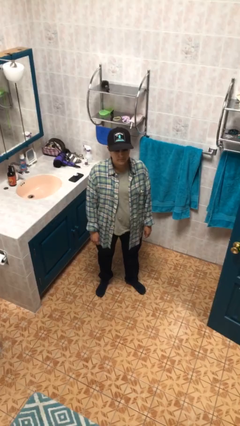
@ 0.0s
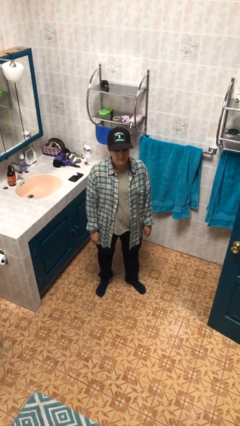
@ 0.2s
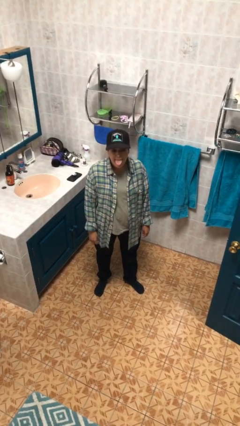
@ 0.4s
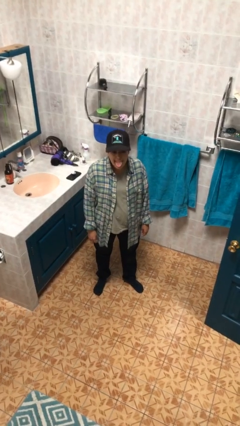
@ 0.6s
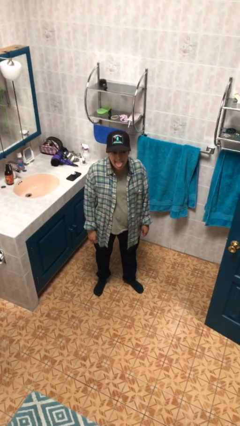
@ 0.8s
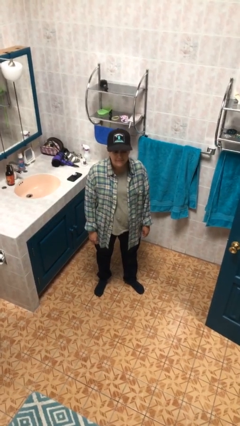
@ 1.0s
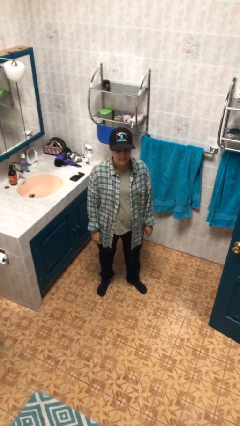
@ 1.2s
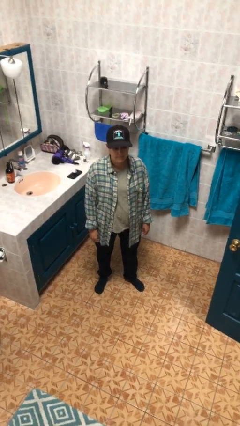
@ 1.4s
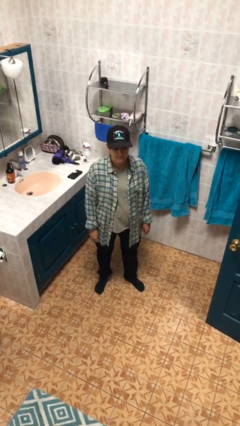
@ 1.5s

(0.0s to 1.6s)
person sticks out tongue

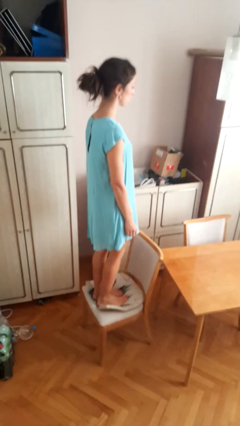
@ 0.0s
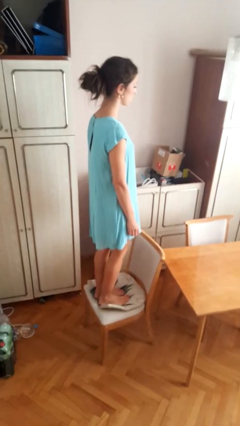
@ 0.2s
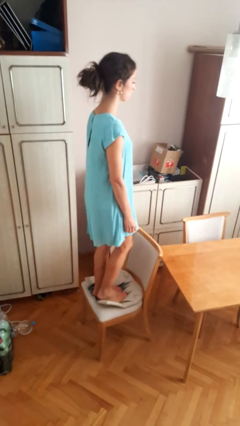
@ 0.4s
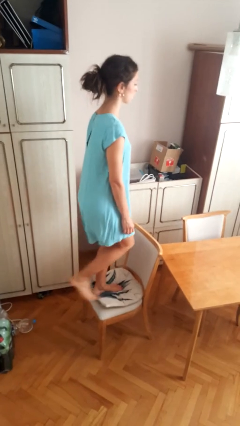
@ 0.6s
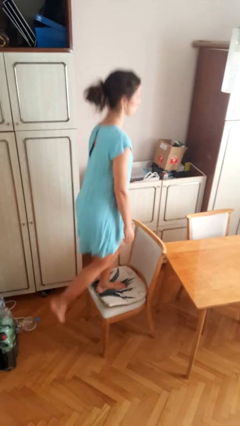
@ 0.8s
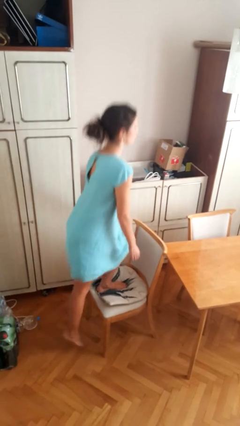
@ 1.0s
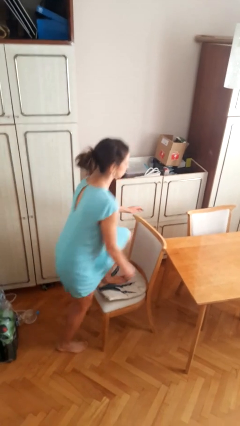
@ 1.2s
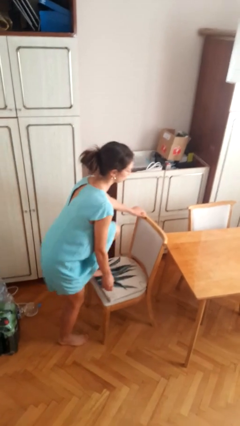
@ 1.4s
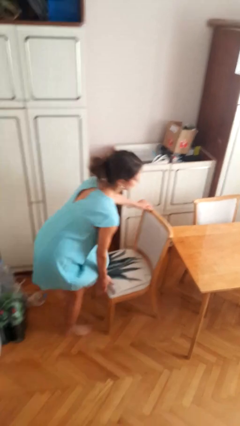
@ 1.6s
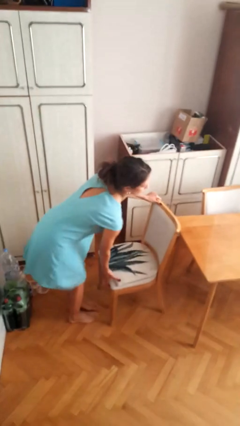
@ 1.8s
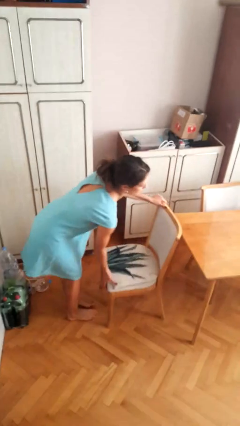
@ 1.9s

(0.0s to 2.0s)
person climbs off chair

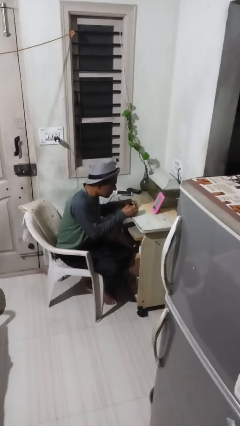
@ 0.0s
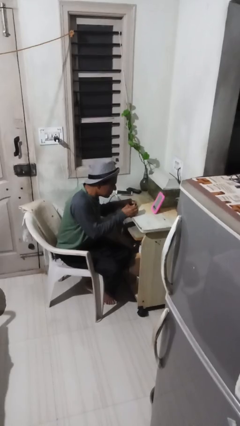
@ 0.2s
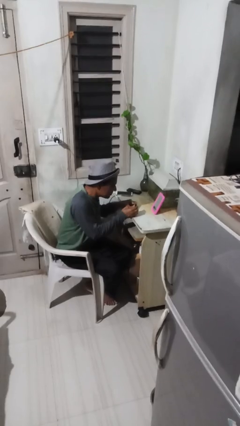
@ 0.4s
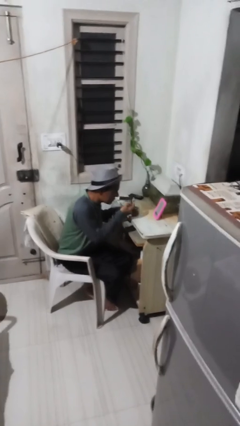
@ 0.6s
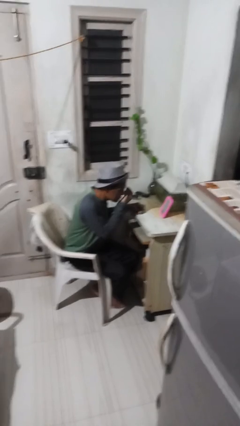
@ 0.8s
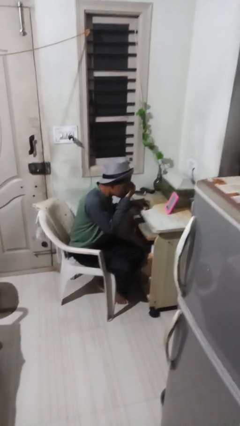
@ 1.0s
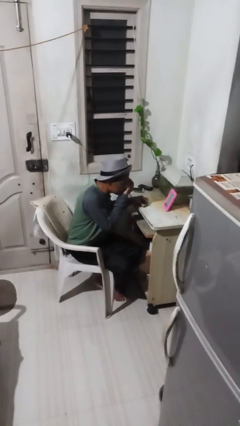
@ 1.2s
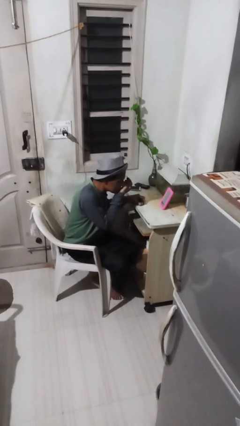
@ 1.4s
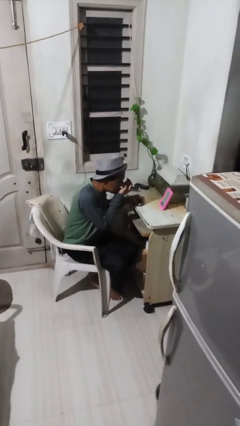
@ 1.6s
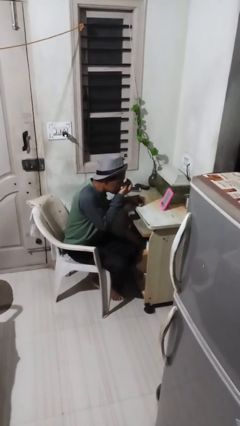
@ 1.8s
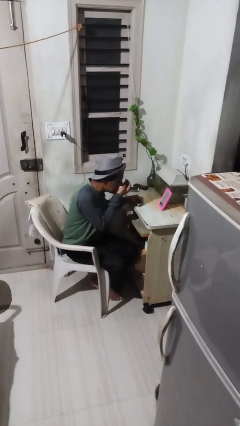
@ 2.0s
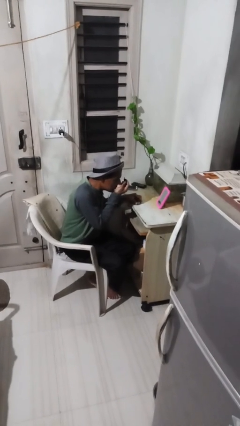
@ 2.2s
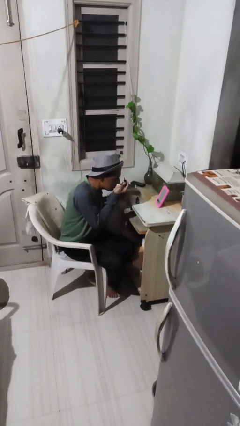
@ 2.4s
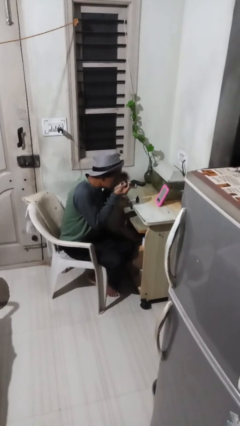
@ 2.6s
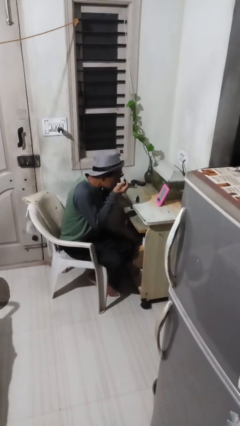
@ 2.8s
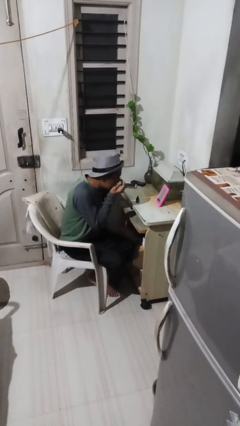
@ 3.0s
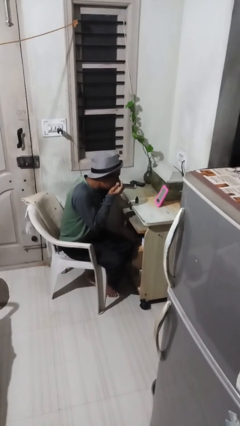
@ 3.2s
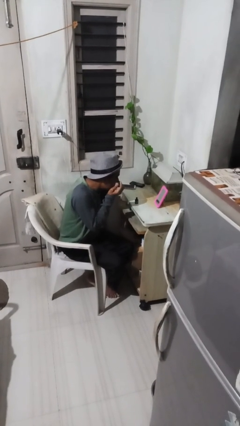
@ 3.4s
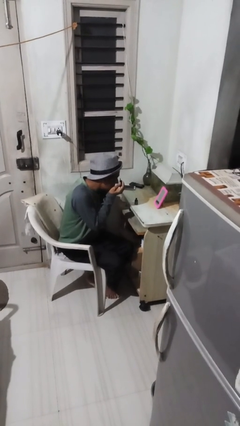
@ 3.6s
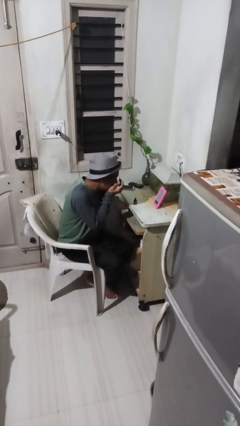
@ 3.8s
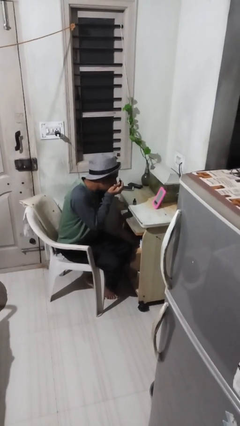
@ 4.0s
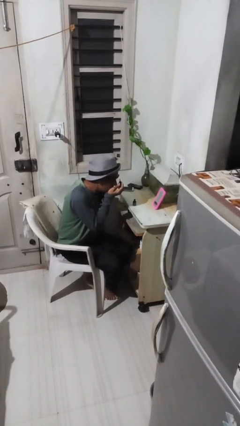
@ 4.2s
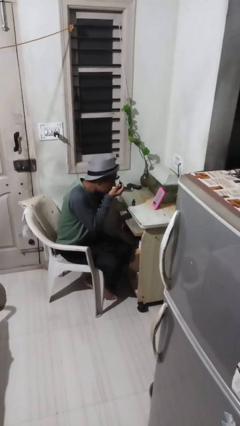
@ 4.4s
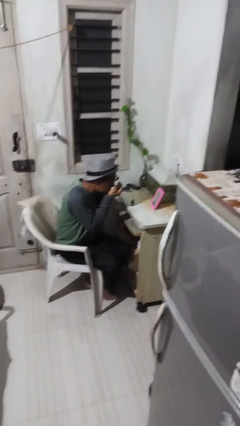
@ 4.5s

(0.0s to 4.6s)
person applies eye makeup

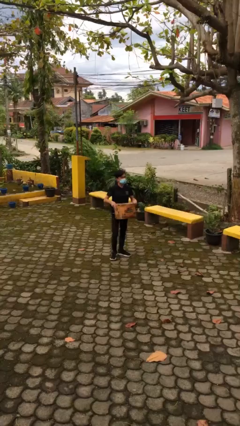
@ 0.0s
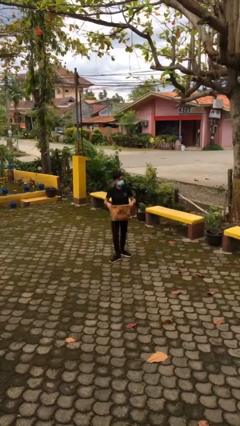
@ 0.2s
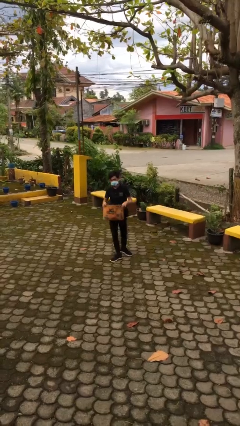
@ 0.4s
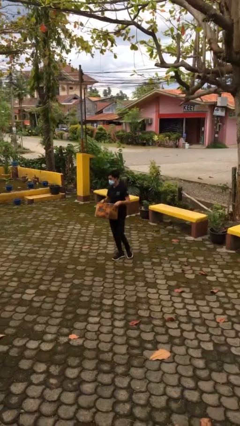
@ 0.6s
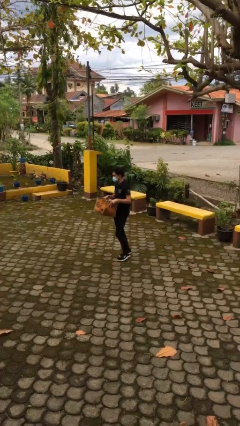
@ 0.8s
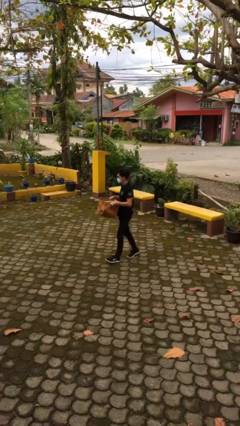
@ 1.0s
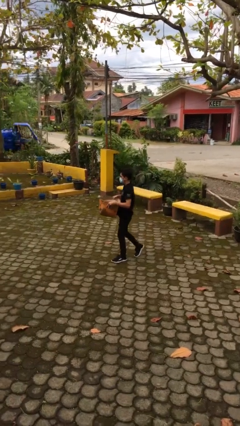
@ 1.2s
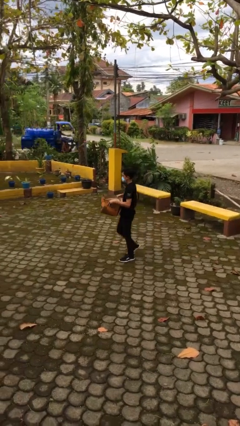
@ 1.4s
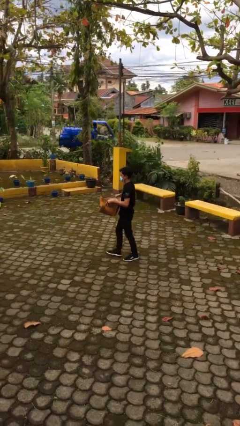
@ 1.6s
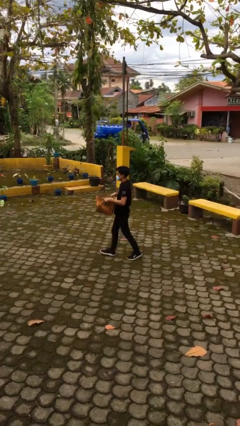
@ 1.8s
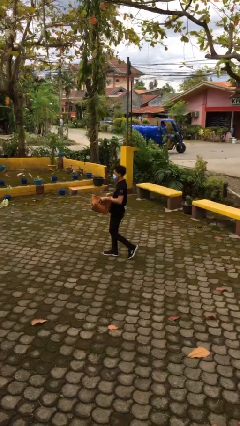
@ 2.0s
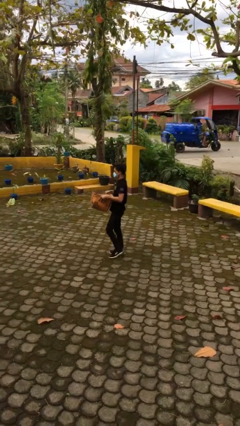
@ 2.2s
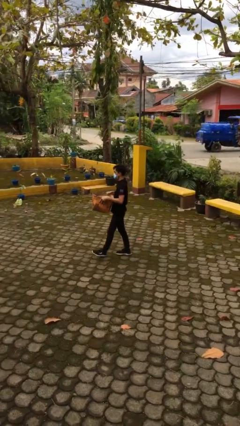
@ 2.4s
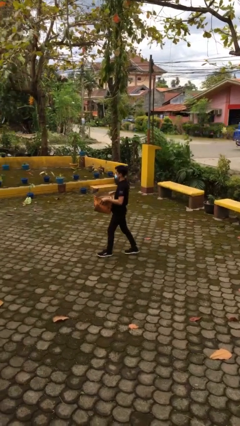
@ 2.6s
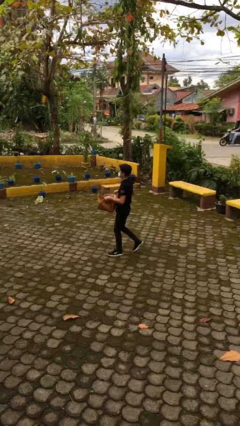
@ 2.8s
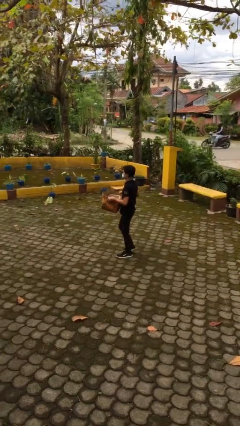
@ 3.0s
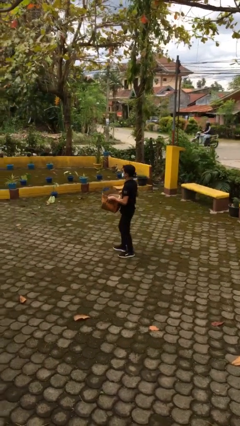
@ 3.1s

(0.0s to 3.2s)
person carries heavy object

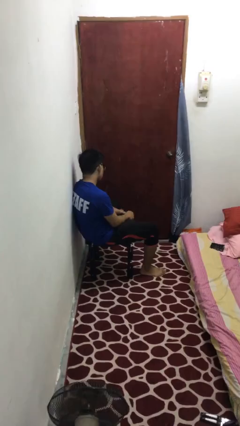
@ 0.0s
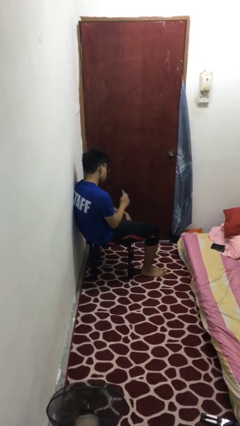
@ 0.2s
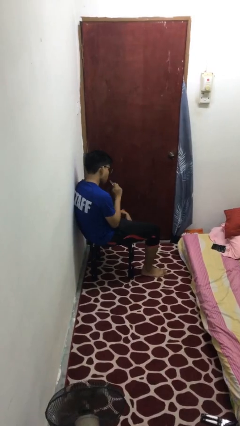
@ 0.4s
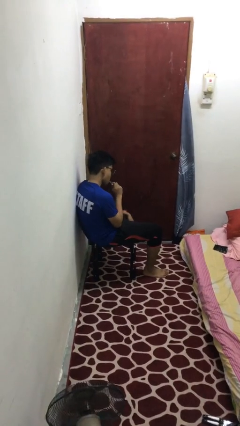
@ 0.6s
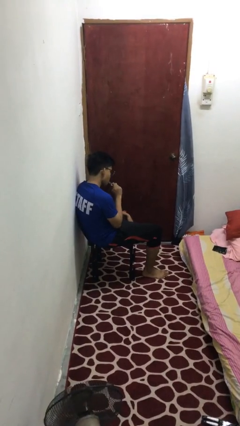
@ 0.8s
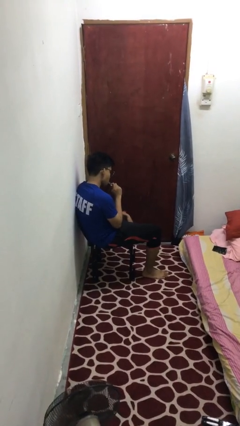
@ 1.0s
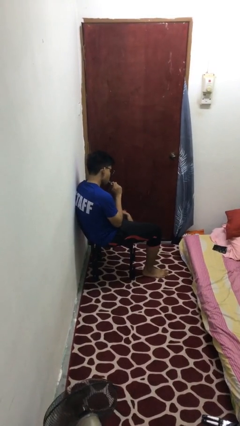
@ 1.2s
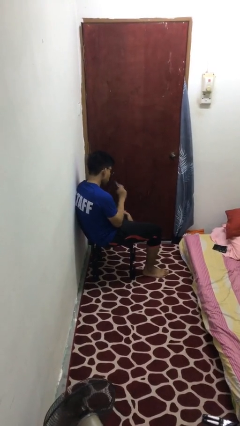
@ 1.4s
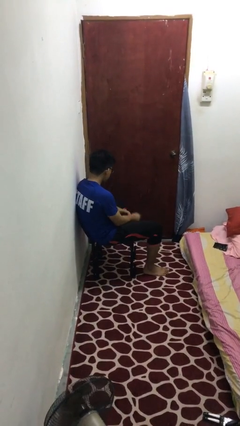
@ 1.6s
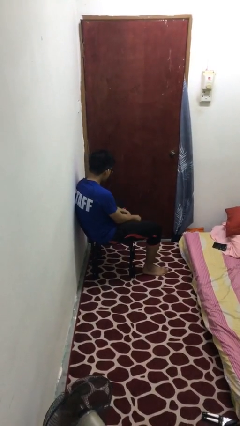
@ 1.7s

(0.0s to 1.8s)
person vapes

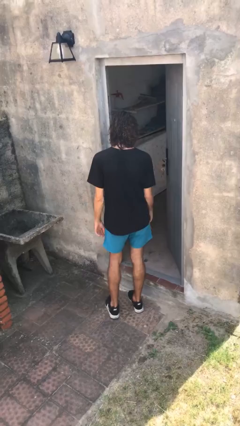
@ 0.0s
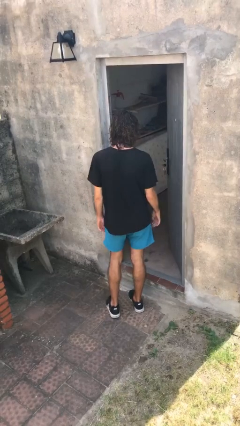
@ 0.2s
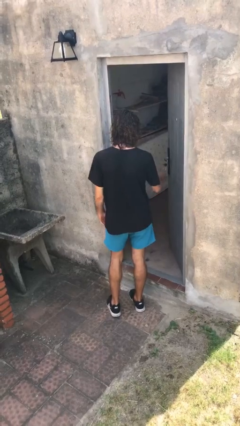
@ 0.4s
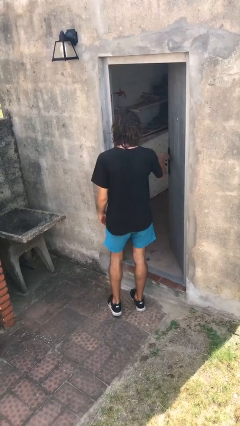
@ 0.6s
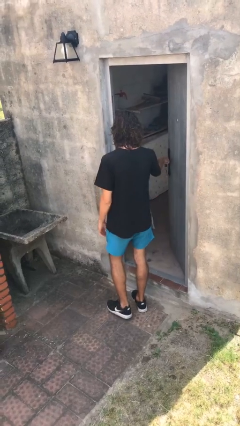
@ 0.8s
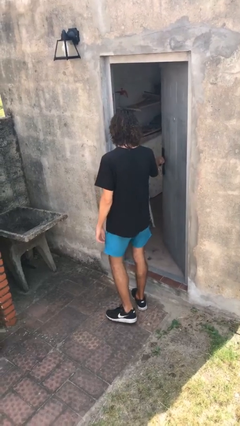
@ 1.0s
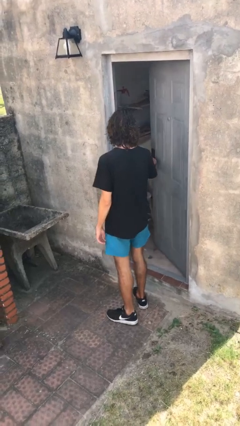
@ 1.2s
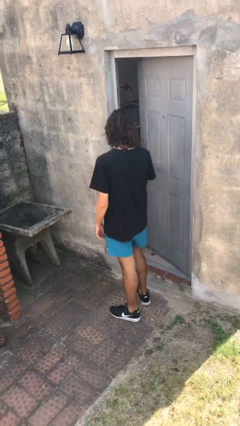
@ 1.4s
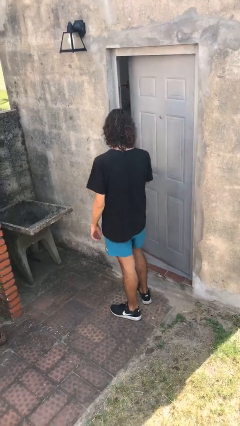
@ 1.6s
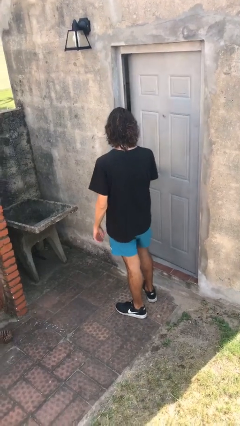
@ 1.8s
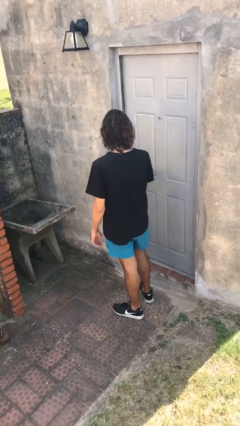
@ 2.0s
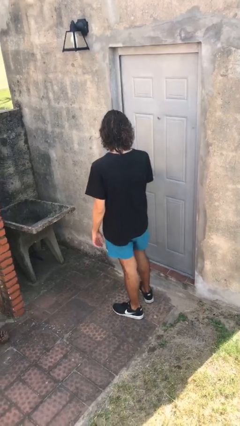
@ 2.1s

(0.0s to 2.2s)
person closes facility door

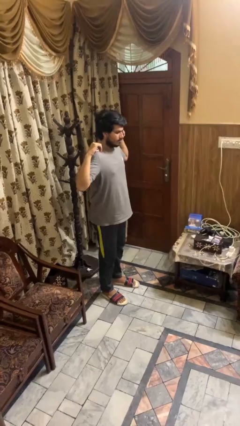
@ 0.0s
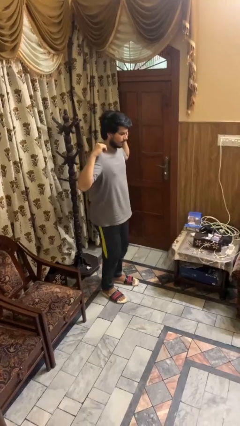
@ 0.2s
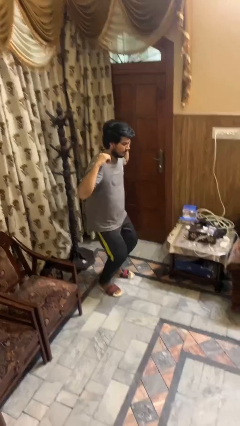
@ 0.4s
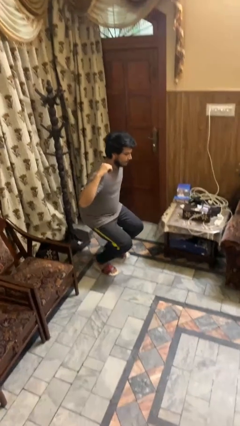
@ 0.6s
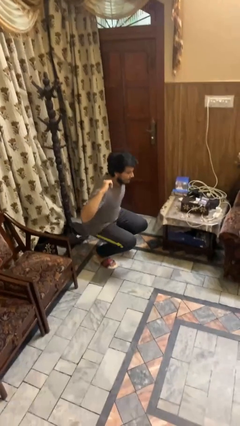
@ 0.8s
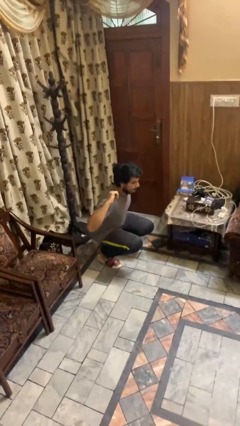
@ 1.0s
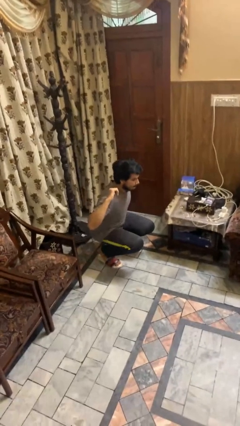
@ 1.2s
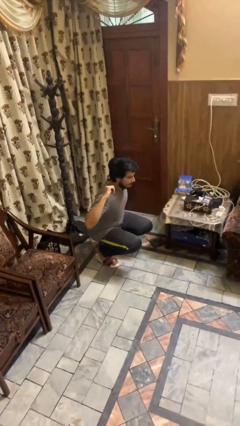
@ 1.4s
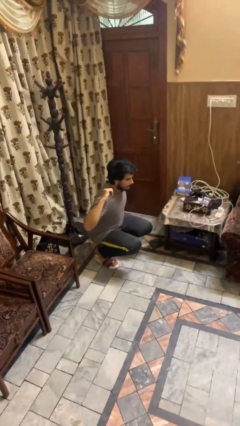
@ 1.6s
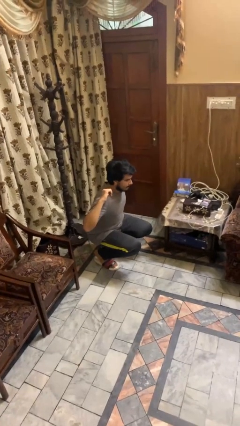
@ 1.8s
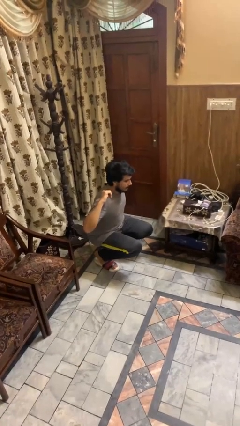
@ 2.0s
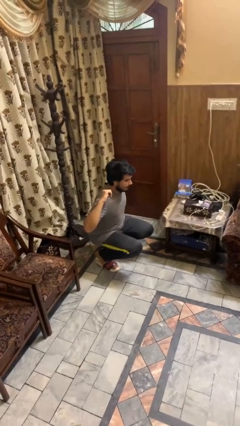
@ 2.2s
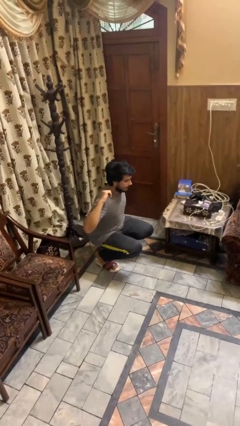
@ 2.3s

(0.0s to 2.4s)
person squats
